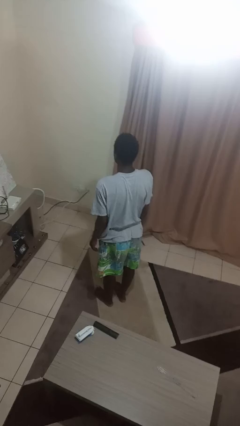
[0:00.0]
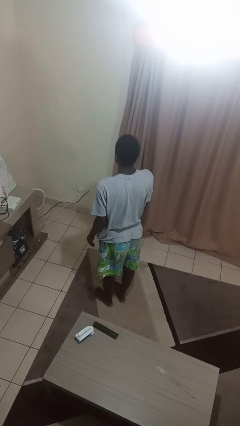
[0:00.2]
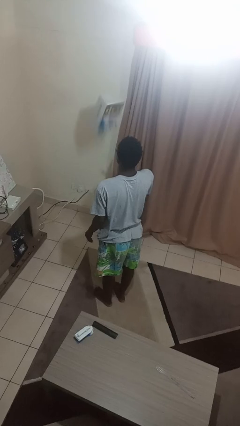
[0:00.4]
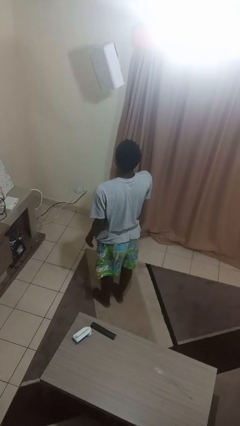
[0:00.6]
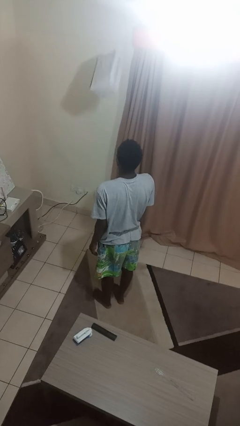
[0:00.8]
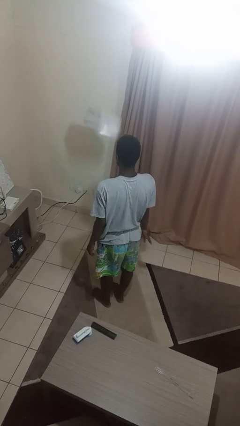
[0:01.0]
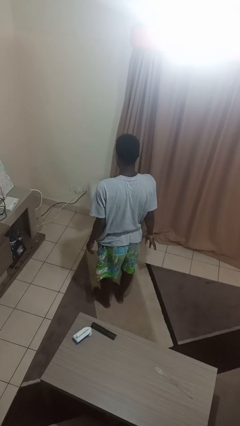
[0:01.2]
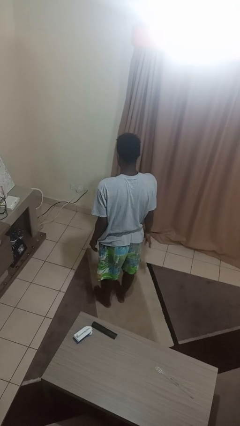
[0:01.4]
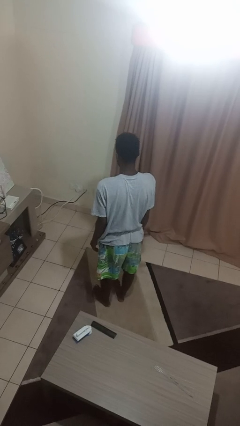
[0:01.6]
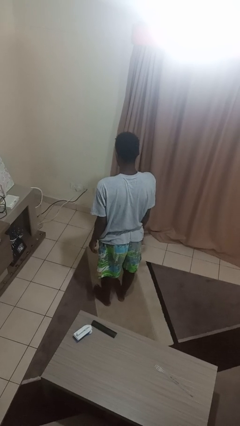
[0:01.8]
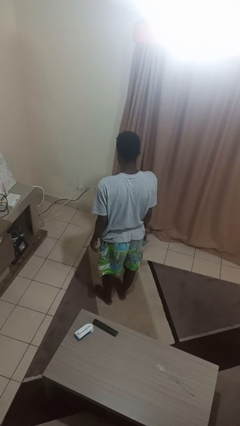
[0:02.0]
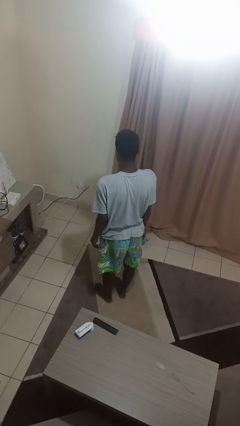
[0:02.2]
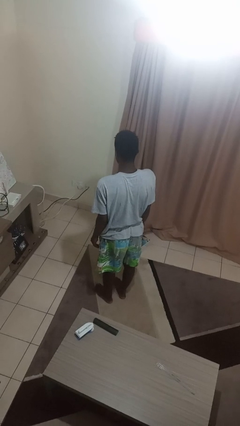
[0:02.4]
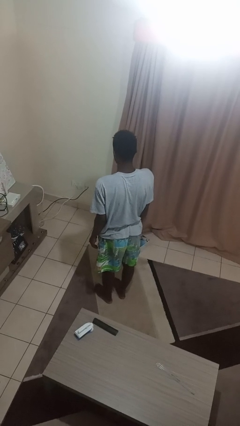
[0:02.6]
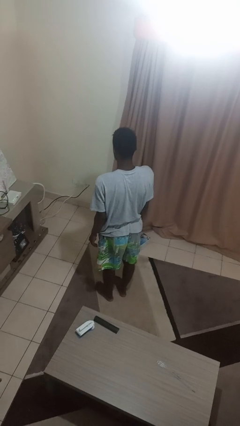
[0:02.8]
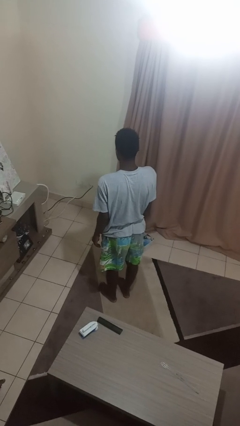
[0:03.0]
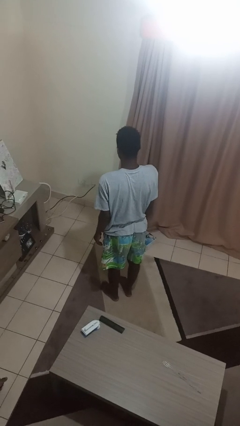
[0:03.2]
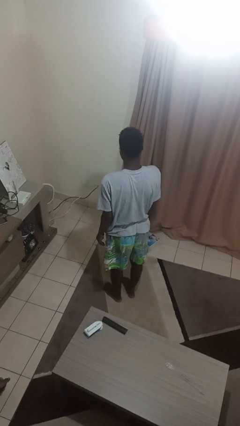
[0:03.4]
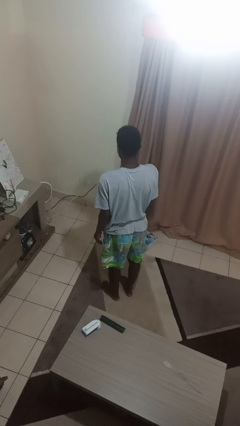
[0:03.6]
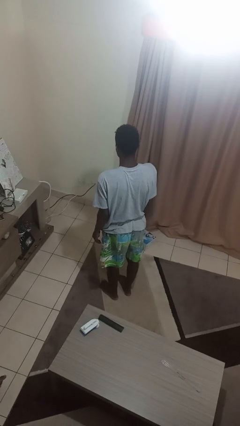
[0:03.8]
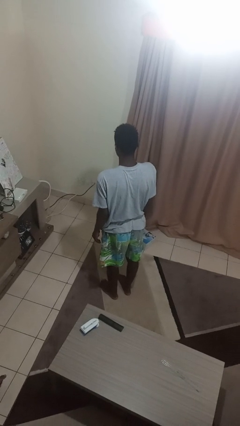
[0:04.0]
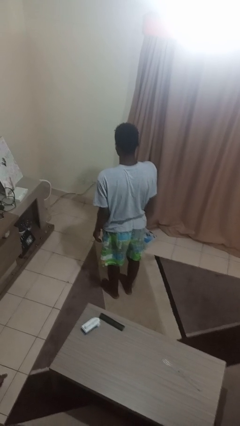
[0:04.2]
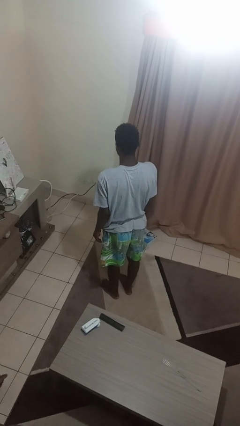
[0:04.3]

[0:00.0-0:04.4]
person throws object into air

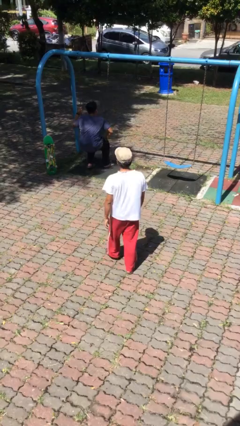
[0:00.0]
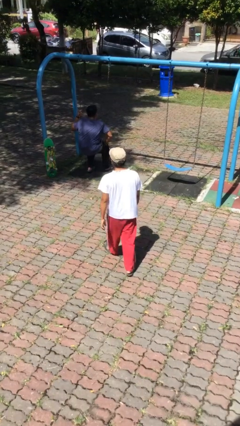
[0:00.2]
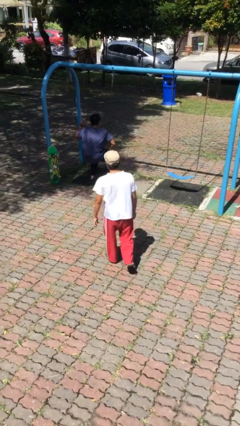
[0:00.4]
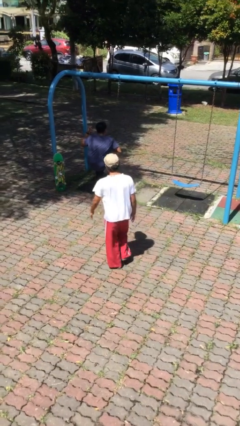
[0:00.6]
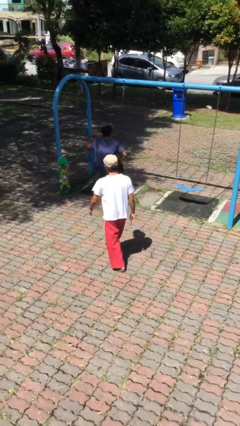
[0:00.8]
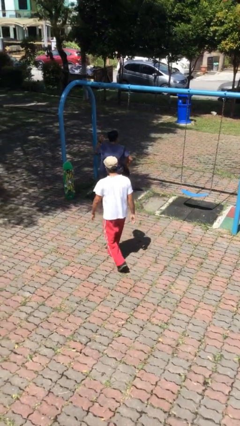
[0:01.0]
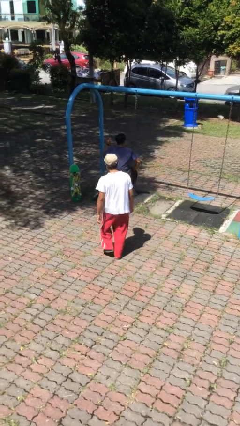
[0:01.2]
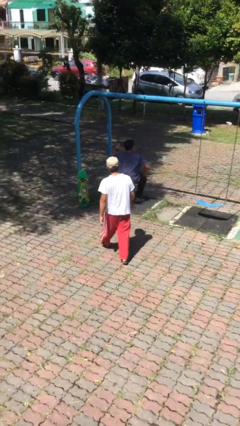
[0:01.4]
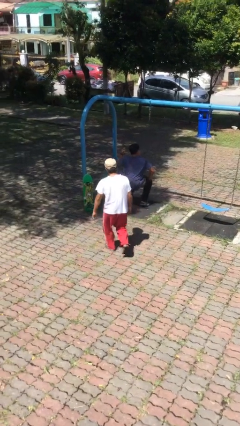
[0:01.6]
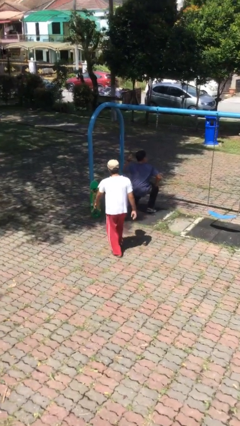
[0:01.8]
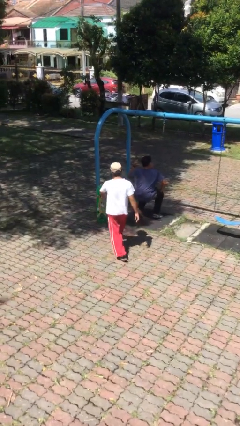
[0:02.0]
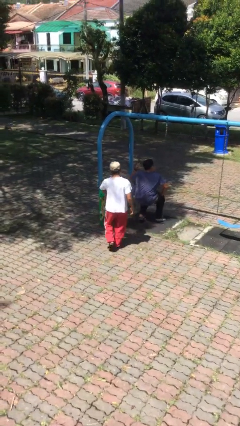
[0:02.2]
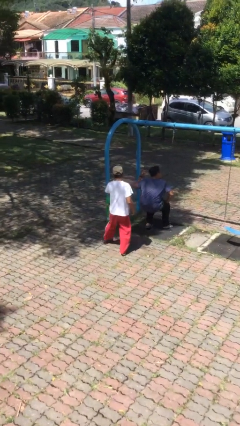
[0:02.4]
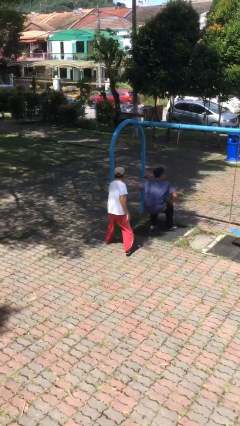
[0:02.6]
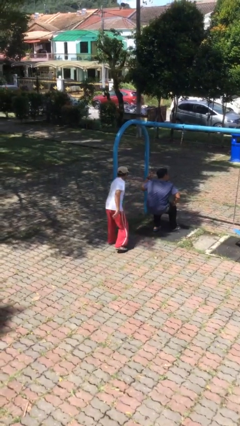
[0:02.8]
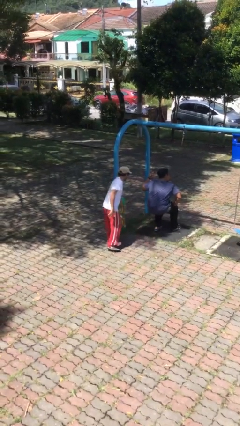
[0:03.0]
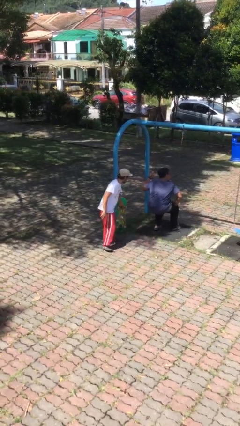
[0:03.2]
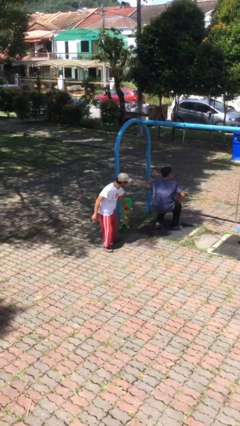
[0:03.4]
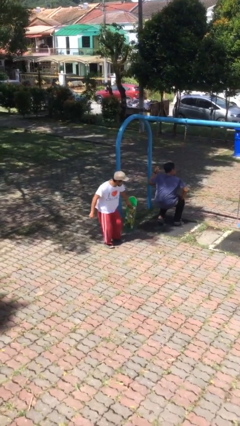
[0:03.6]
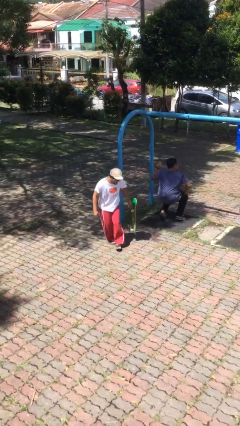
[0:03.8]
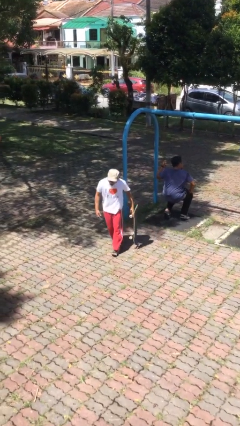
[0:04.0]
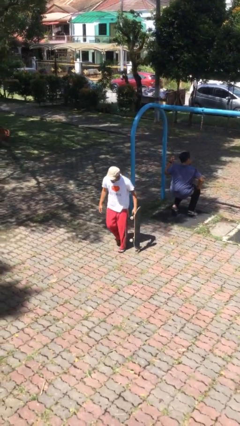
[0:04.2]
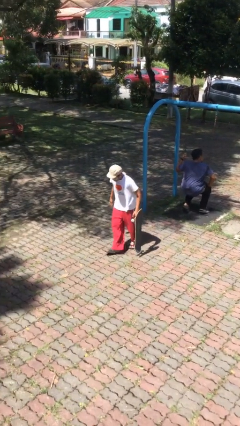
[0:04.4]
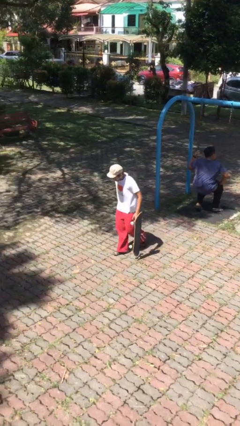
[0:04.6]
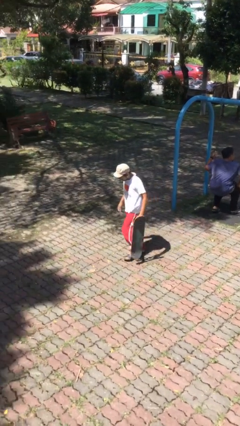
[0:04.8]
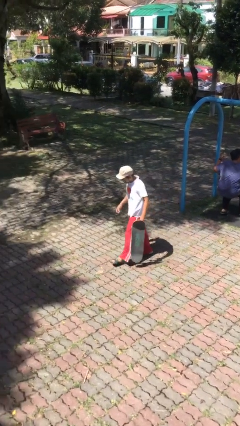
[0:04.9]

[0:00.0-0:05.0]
person steals object from person

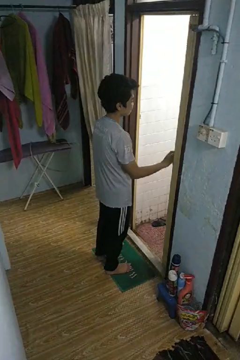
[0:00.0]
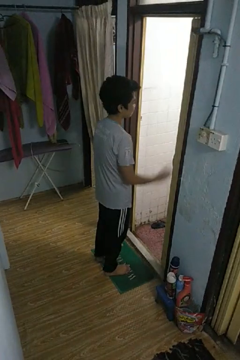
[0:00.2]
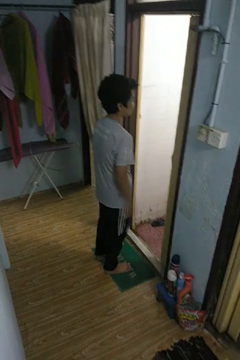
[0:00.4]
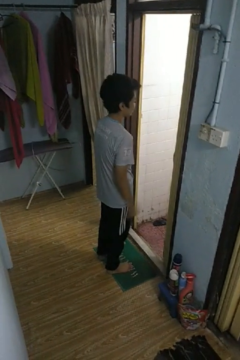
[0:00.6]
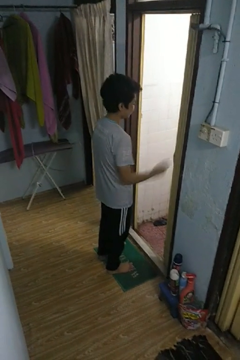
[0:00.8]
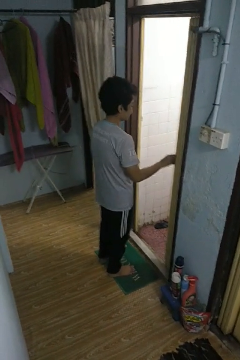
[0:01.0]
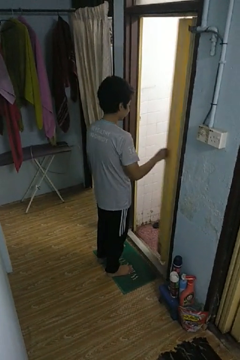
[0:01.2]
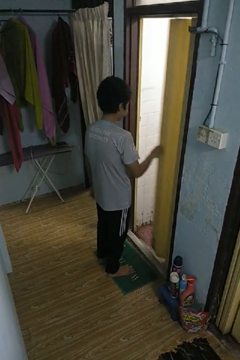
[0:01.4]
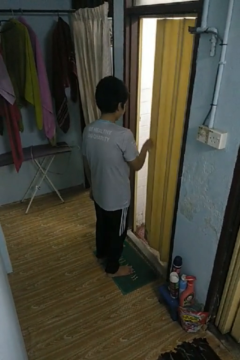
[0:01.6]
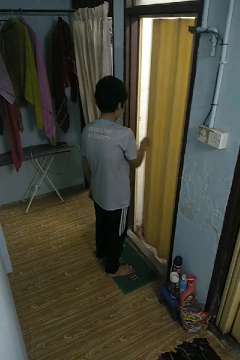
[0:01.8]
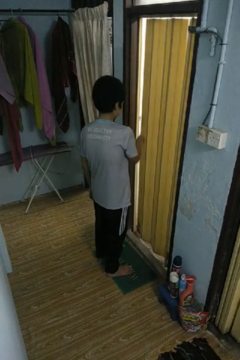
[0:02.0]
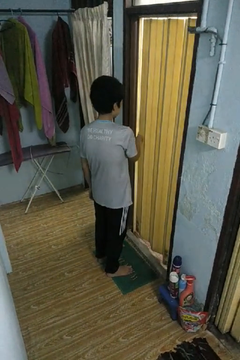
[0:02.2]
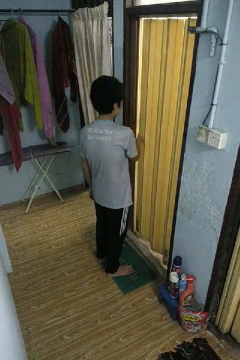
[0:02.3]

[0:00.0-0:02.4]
person closes sliding door

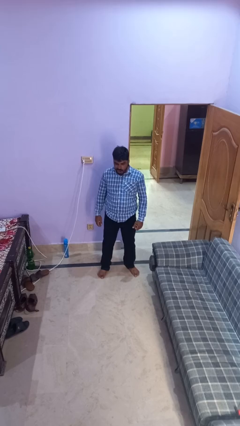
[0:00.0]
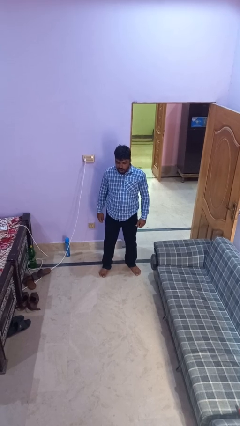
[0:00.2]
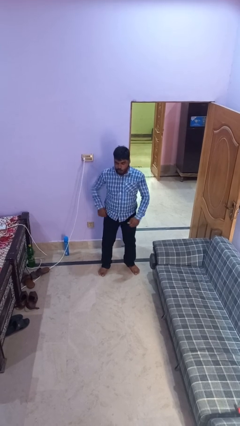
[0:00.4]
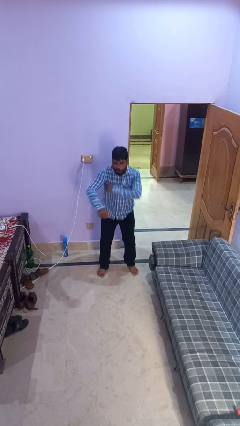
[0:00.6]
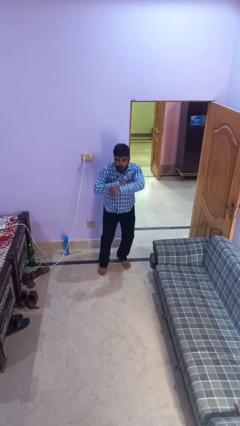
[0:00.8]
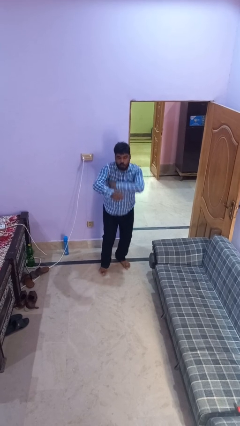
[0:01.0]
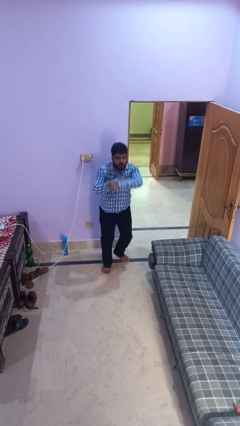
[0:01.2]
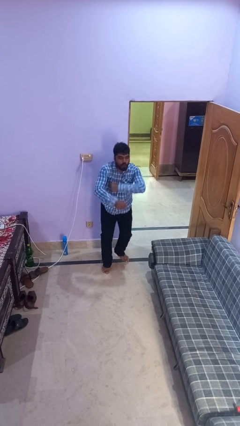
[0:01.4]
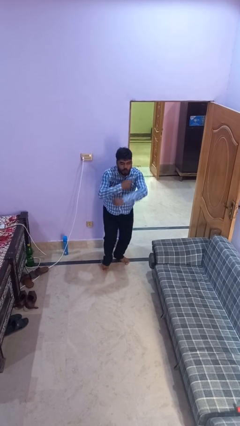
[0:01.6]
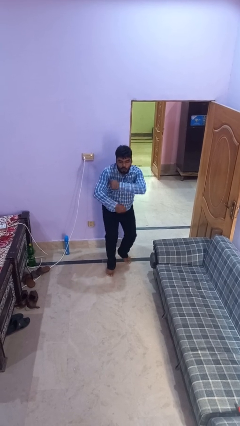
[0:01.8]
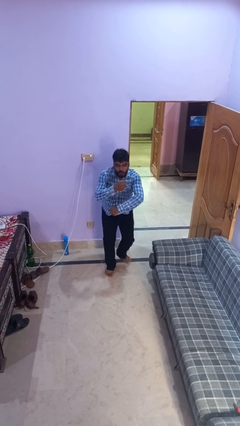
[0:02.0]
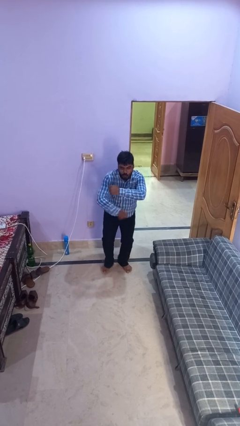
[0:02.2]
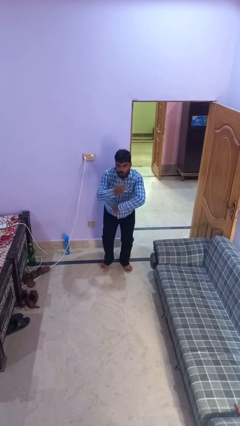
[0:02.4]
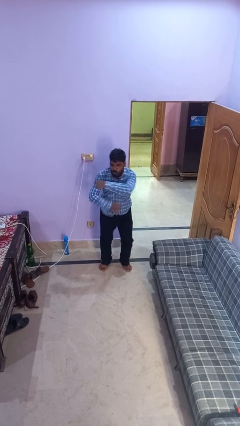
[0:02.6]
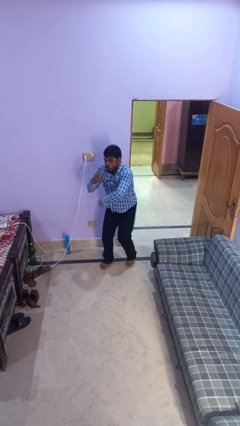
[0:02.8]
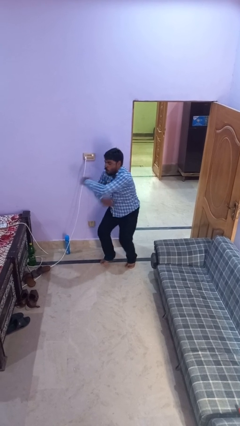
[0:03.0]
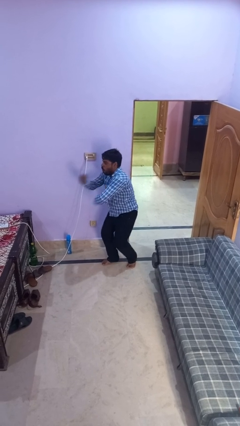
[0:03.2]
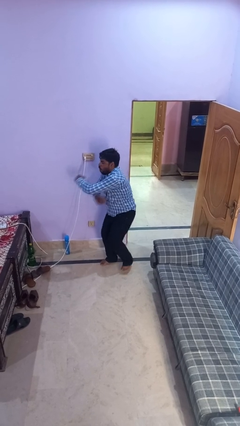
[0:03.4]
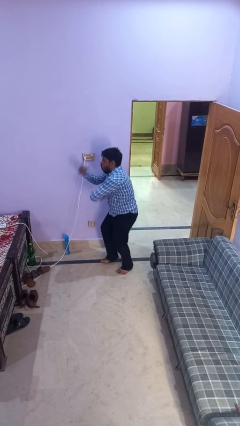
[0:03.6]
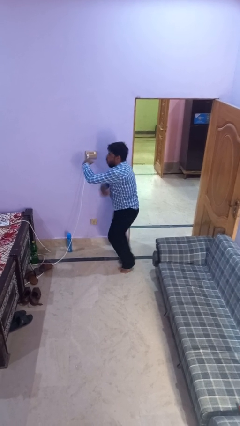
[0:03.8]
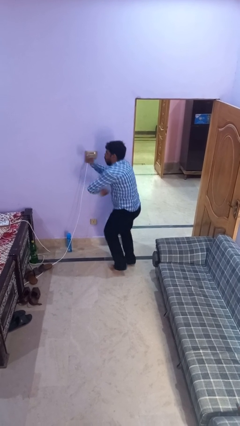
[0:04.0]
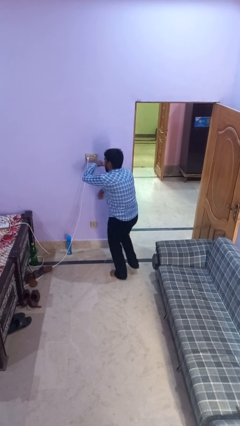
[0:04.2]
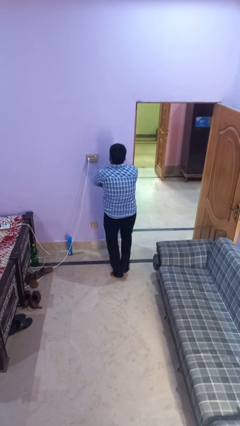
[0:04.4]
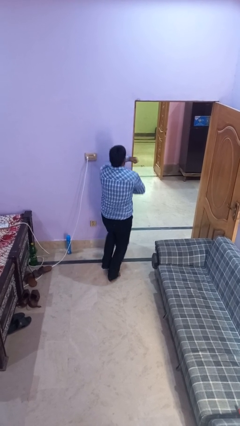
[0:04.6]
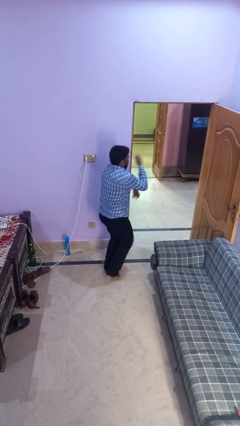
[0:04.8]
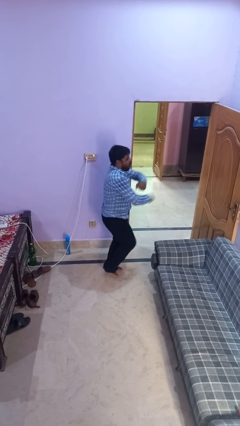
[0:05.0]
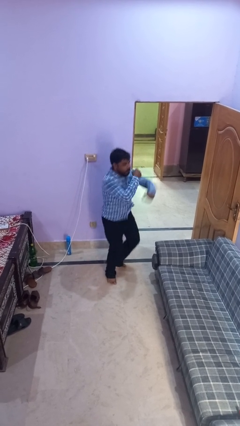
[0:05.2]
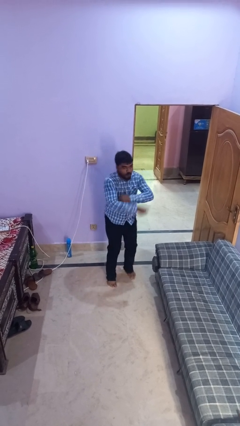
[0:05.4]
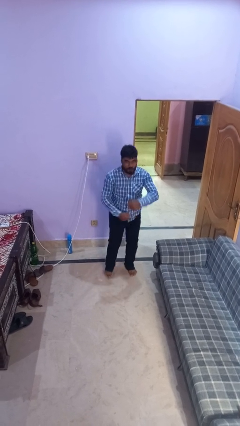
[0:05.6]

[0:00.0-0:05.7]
person dances in place

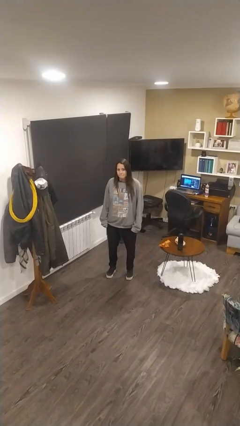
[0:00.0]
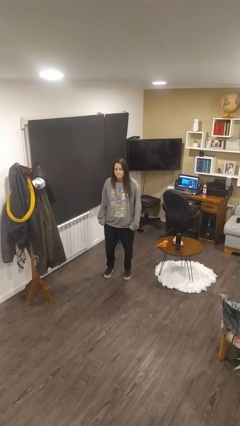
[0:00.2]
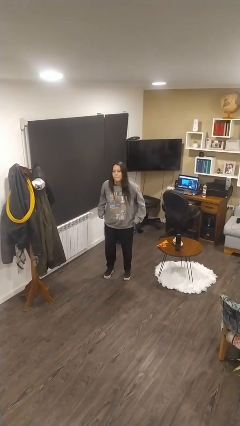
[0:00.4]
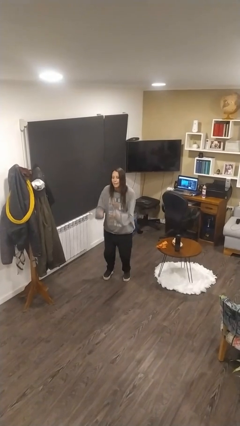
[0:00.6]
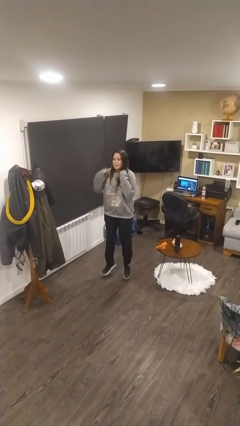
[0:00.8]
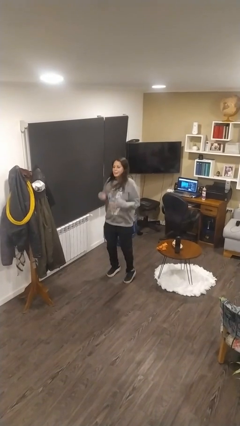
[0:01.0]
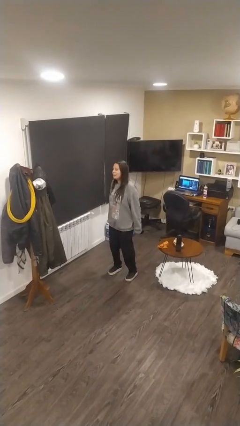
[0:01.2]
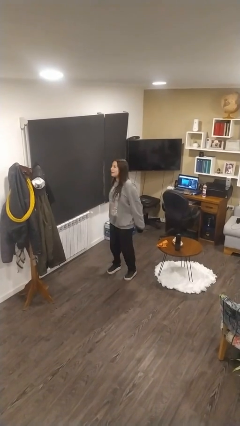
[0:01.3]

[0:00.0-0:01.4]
person jumps
